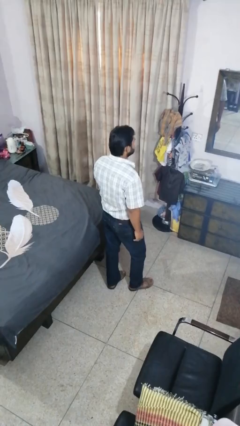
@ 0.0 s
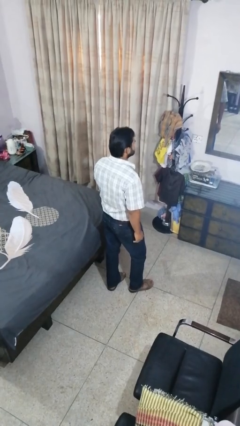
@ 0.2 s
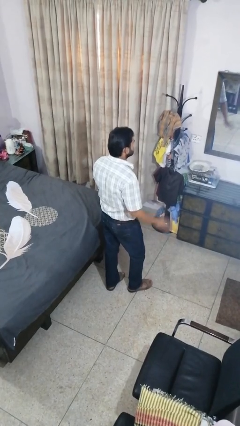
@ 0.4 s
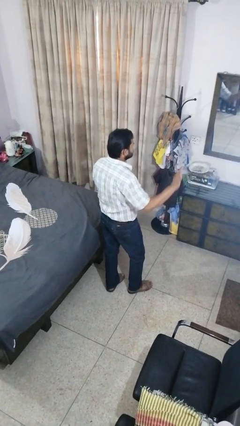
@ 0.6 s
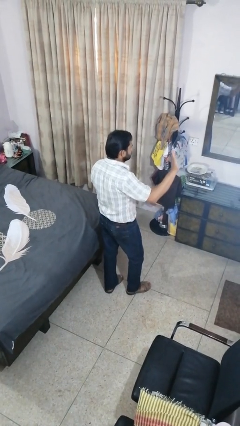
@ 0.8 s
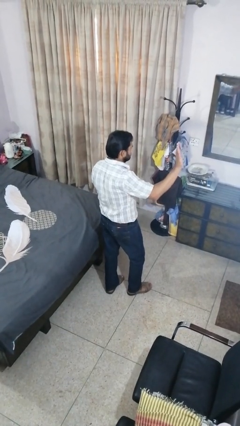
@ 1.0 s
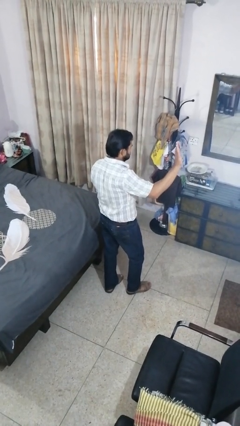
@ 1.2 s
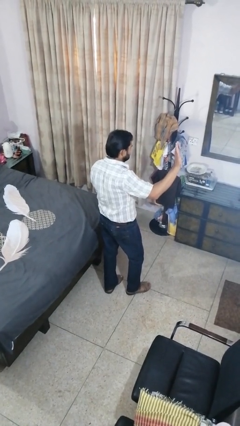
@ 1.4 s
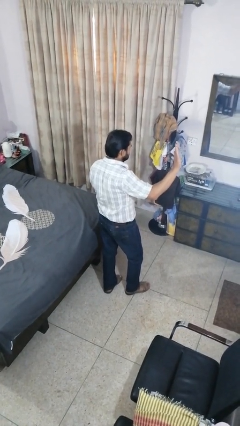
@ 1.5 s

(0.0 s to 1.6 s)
person gestures stop

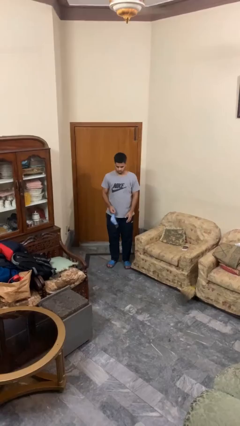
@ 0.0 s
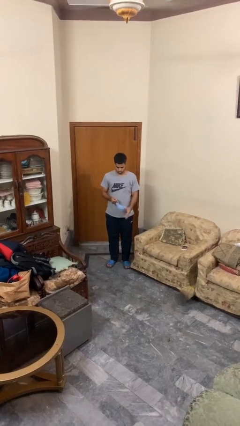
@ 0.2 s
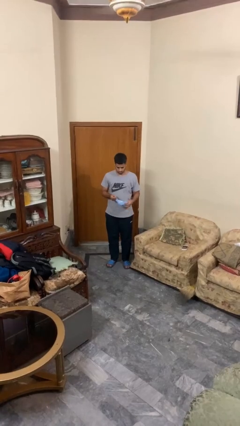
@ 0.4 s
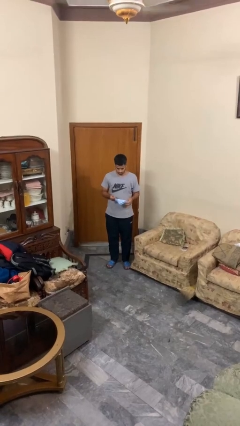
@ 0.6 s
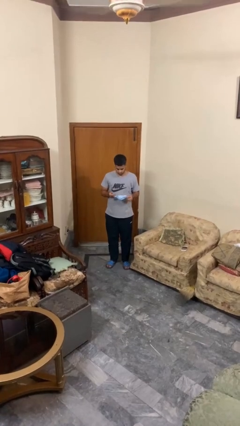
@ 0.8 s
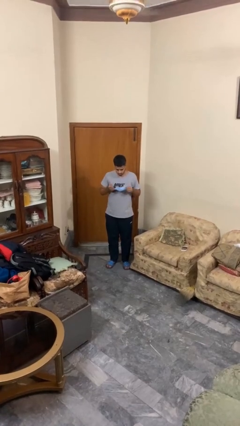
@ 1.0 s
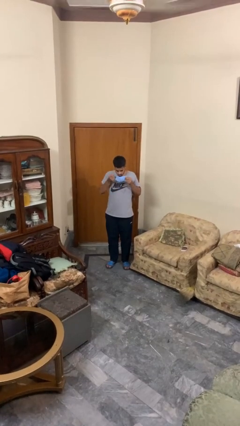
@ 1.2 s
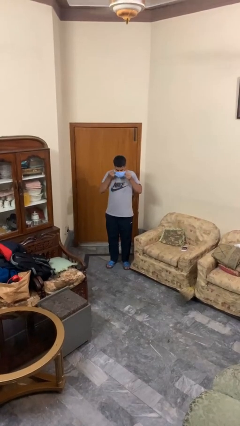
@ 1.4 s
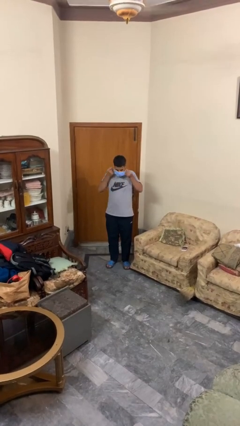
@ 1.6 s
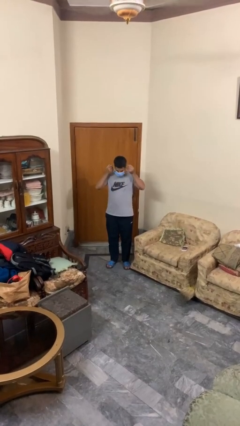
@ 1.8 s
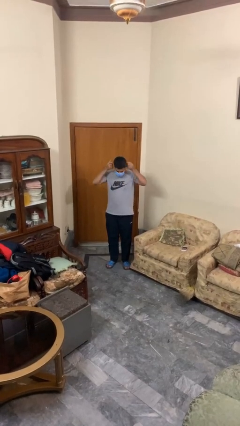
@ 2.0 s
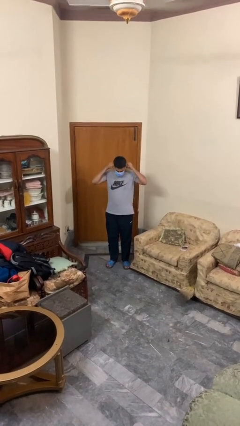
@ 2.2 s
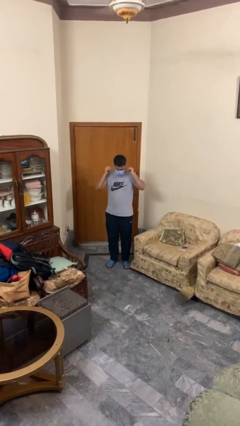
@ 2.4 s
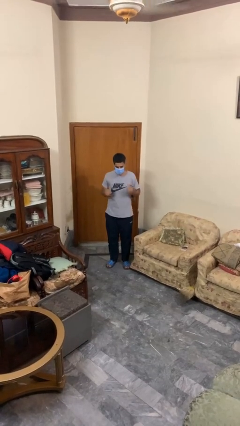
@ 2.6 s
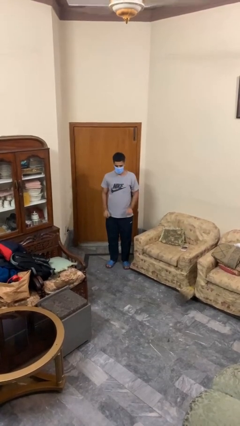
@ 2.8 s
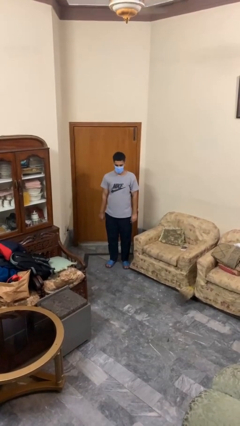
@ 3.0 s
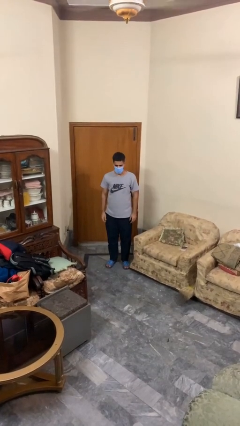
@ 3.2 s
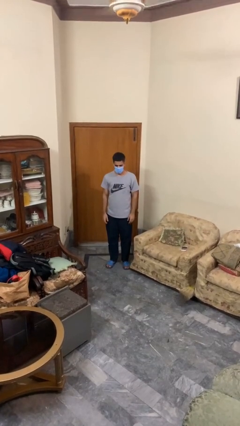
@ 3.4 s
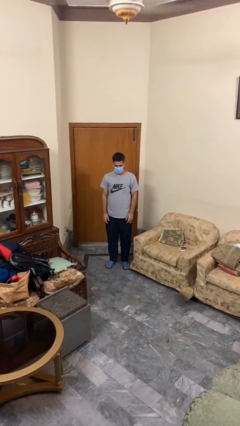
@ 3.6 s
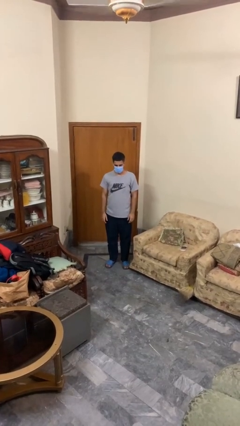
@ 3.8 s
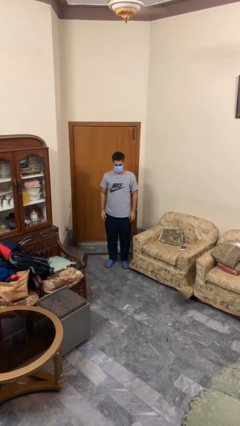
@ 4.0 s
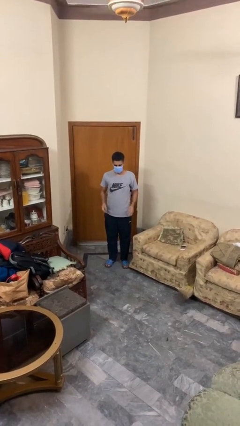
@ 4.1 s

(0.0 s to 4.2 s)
person puts on facemask

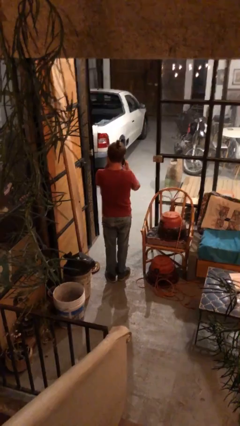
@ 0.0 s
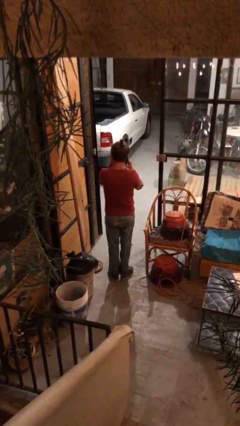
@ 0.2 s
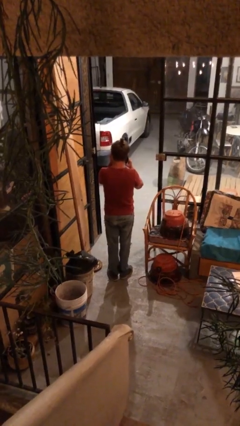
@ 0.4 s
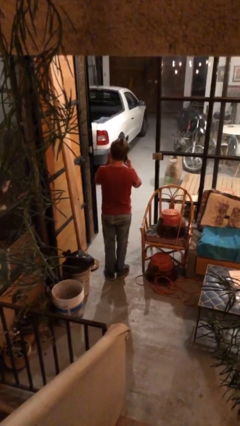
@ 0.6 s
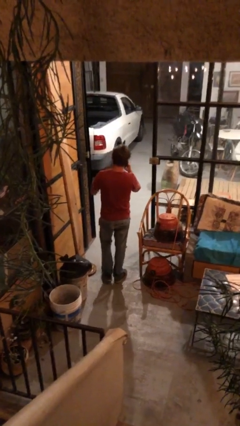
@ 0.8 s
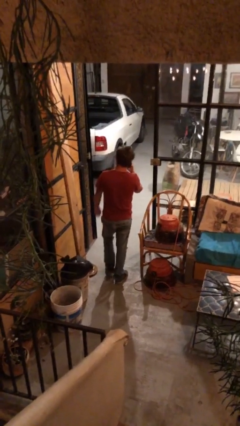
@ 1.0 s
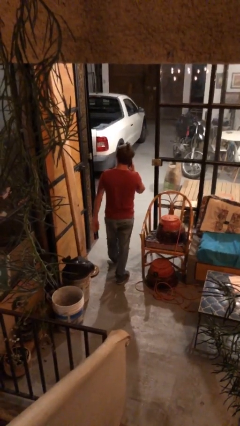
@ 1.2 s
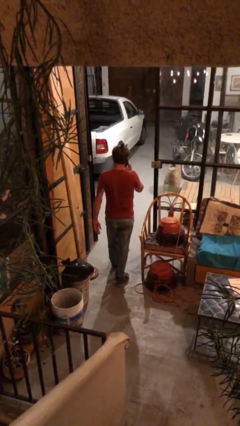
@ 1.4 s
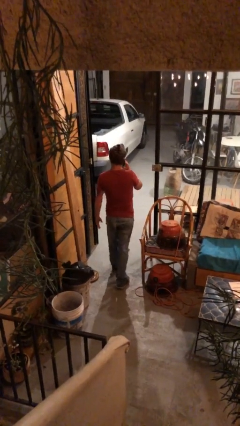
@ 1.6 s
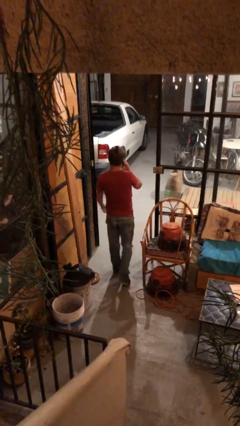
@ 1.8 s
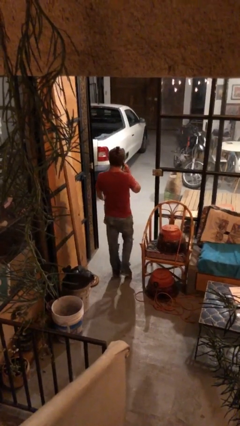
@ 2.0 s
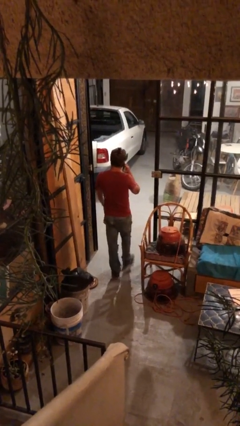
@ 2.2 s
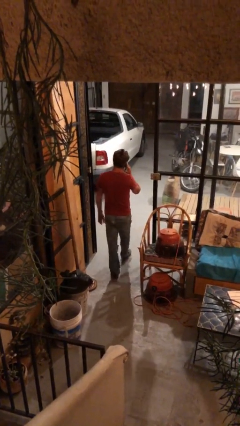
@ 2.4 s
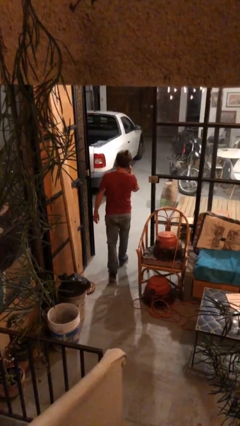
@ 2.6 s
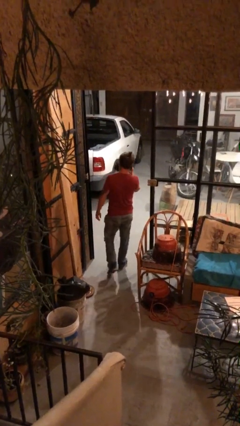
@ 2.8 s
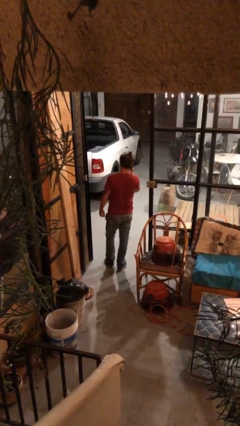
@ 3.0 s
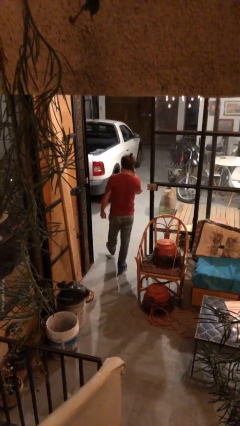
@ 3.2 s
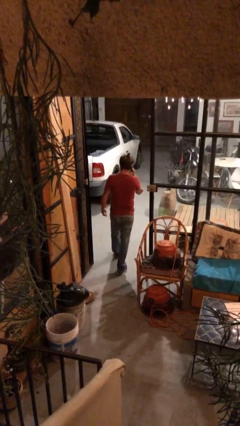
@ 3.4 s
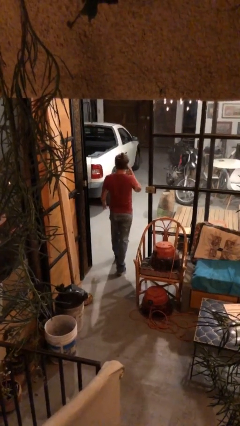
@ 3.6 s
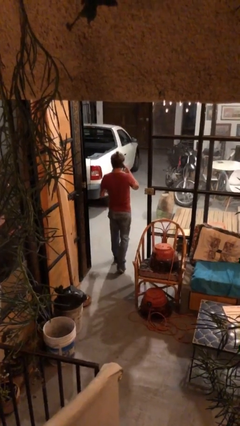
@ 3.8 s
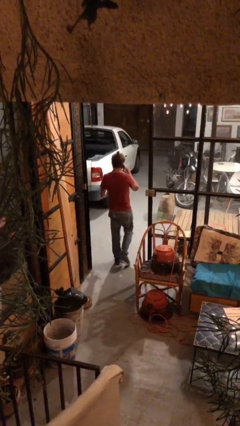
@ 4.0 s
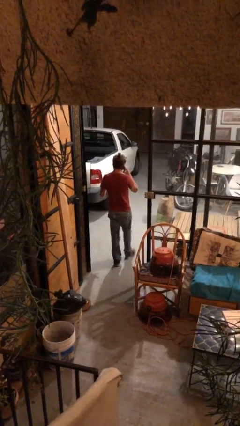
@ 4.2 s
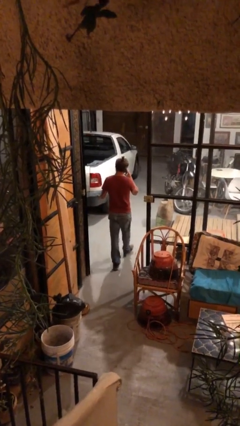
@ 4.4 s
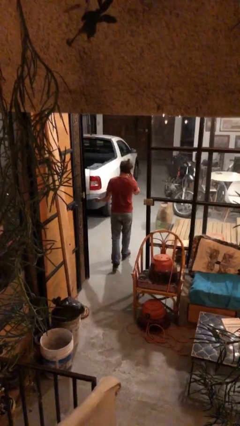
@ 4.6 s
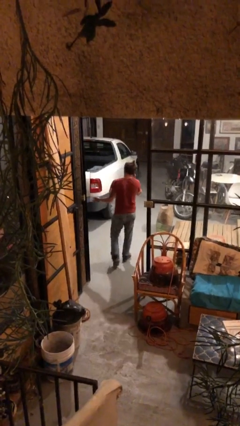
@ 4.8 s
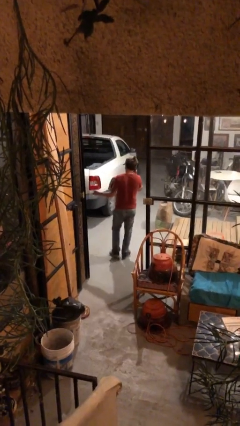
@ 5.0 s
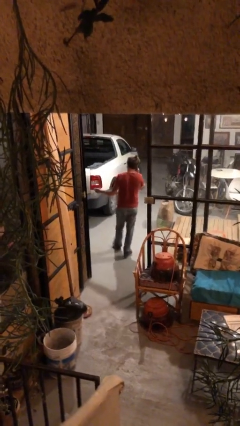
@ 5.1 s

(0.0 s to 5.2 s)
person exits scene through structure

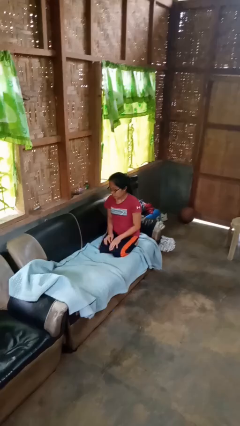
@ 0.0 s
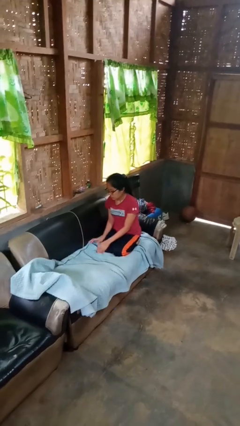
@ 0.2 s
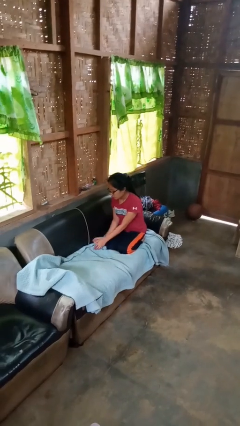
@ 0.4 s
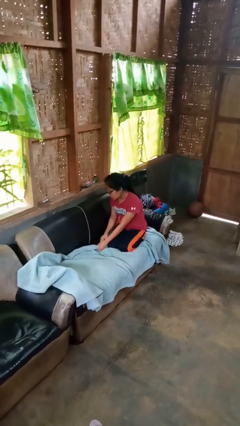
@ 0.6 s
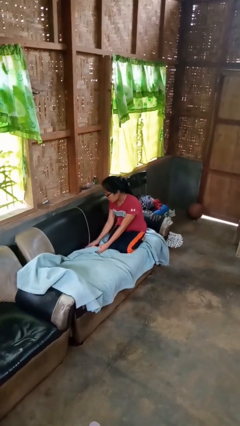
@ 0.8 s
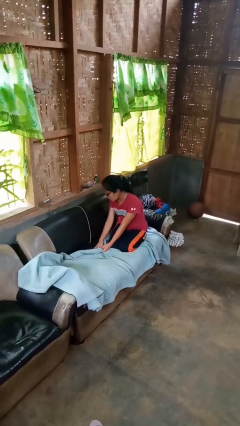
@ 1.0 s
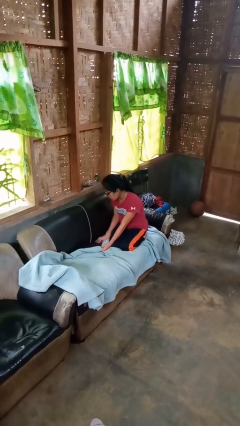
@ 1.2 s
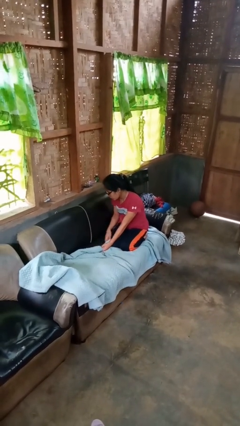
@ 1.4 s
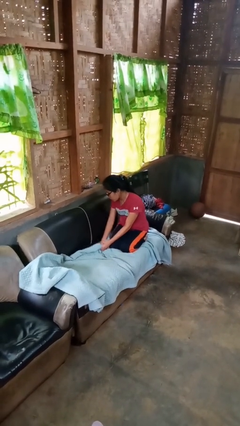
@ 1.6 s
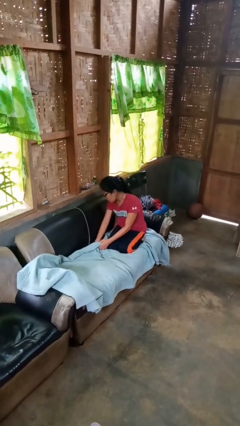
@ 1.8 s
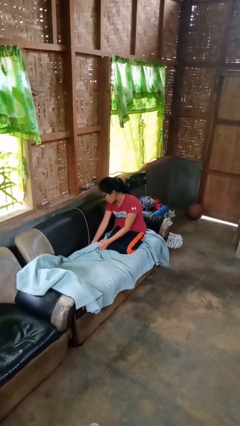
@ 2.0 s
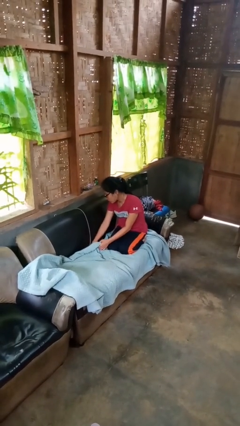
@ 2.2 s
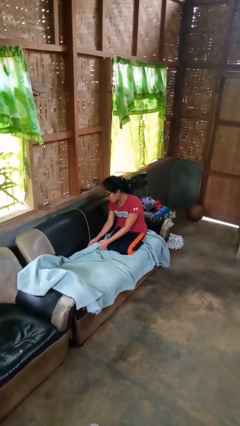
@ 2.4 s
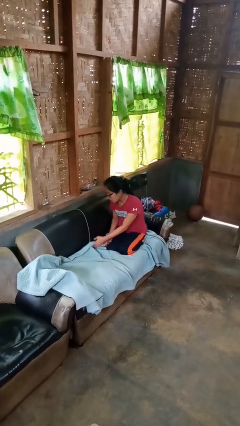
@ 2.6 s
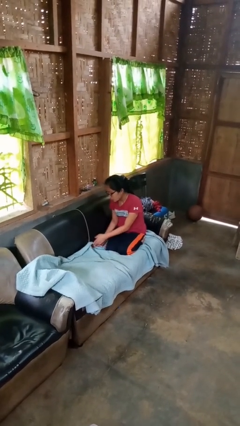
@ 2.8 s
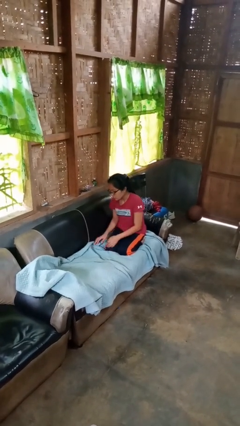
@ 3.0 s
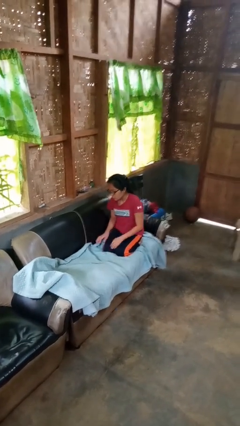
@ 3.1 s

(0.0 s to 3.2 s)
person searches in couch

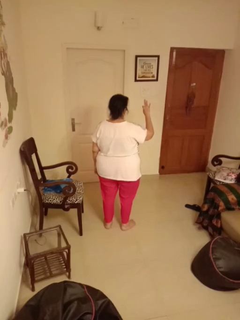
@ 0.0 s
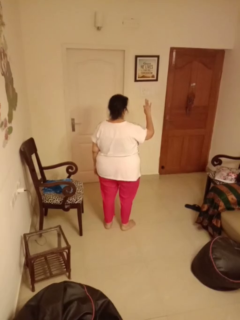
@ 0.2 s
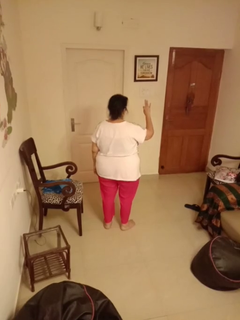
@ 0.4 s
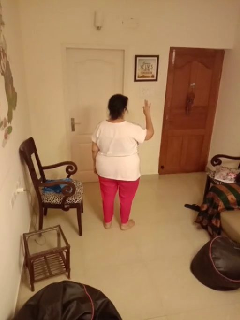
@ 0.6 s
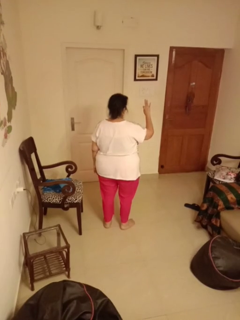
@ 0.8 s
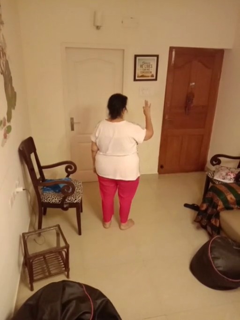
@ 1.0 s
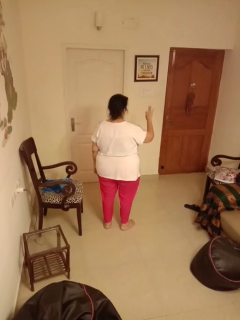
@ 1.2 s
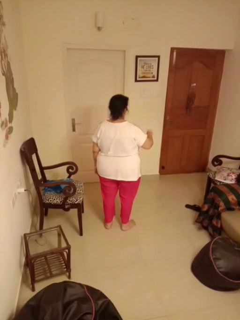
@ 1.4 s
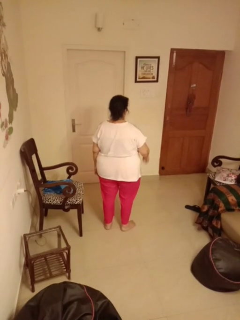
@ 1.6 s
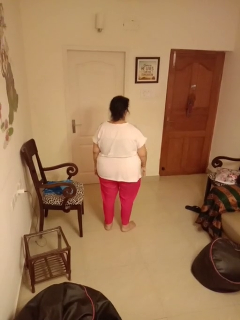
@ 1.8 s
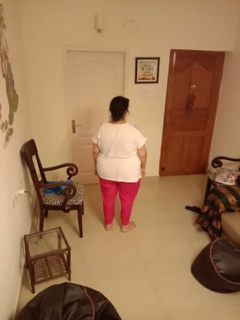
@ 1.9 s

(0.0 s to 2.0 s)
person gestures number three

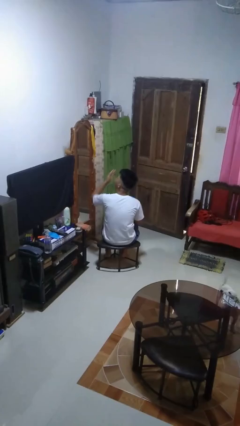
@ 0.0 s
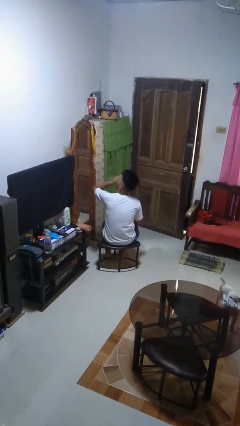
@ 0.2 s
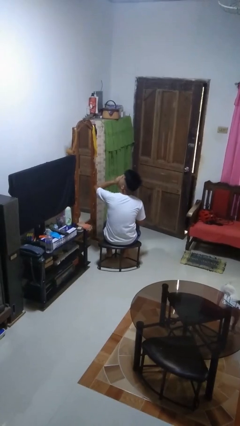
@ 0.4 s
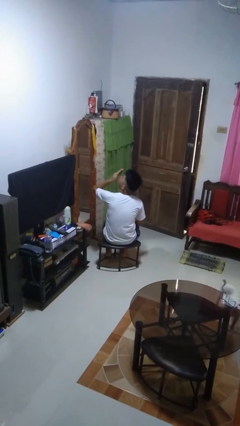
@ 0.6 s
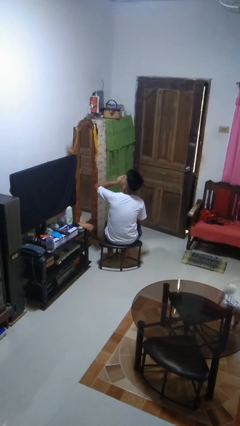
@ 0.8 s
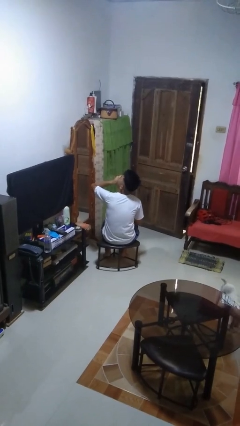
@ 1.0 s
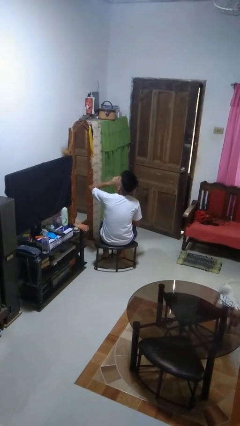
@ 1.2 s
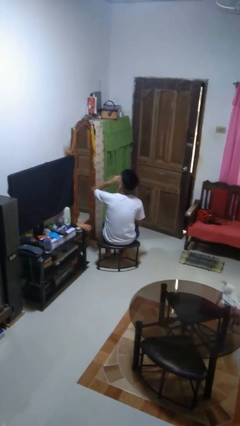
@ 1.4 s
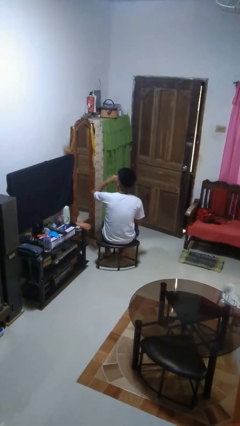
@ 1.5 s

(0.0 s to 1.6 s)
person yawns
